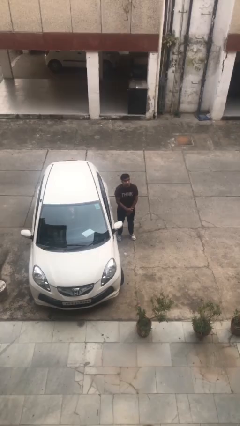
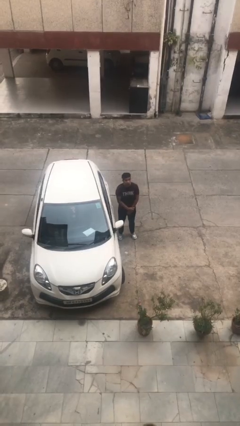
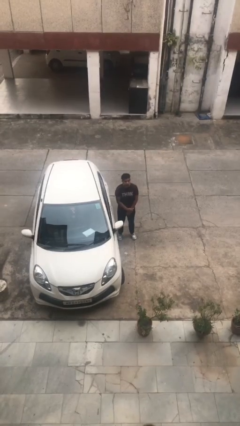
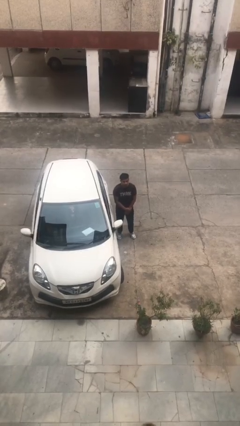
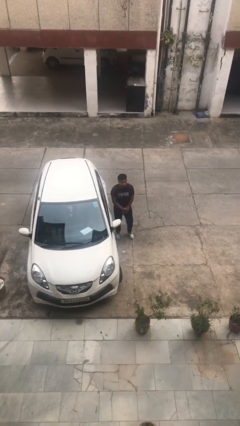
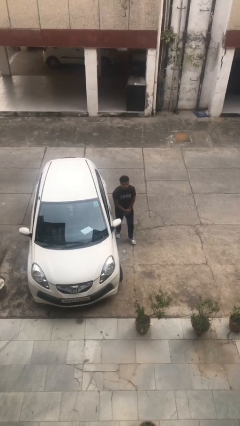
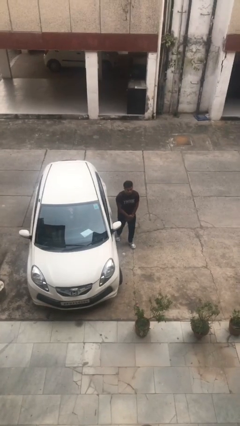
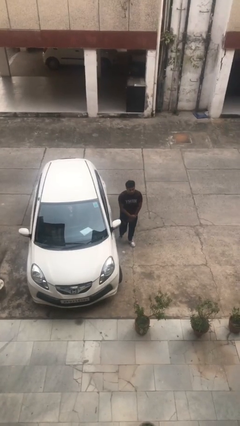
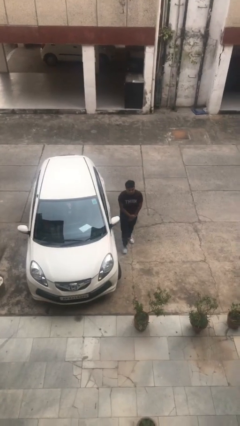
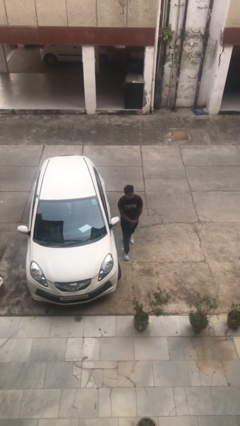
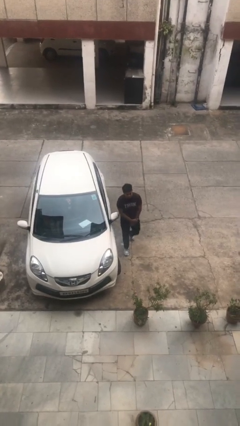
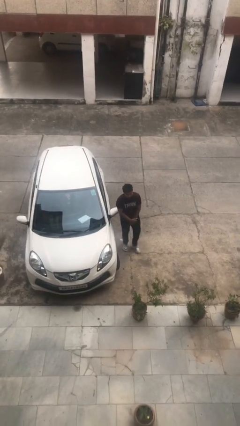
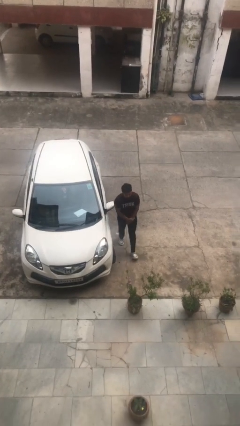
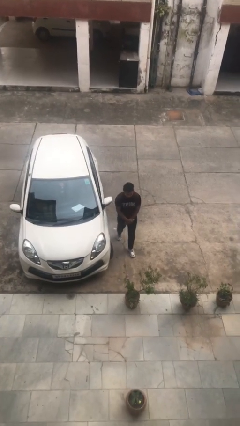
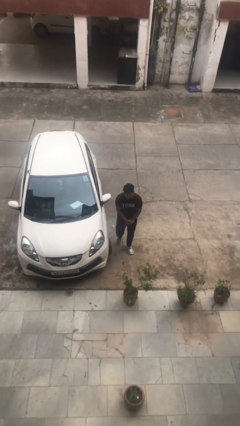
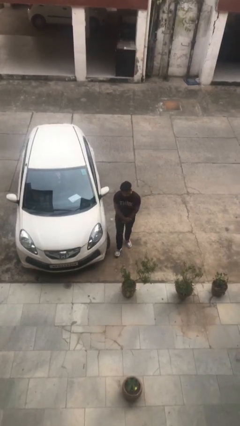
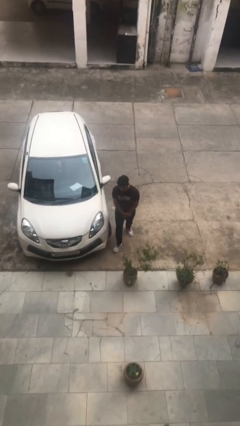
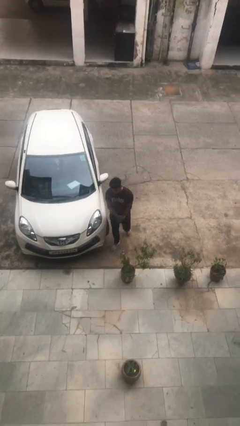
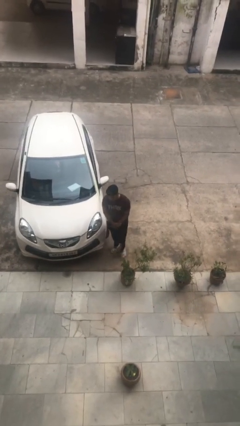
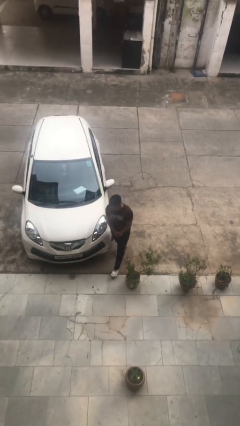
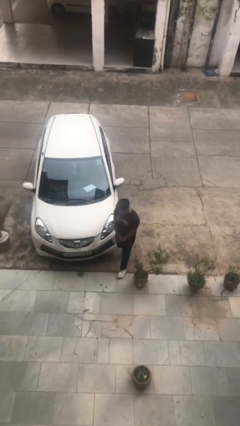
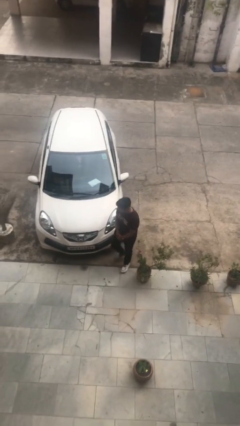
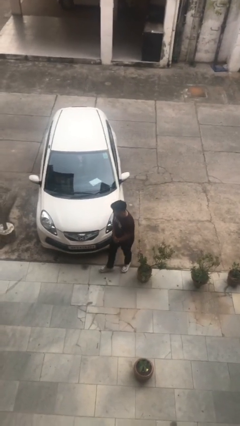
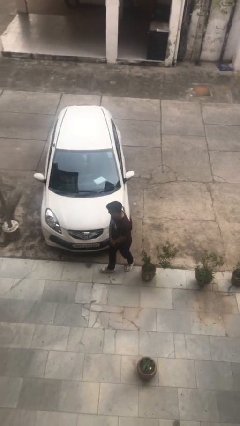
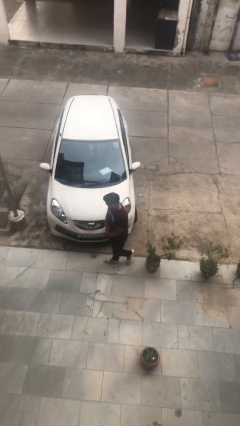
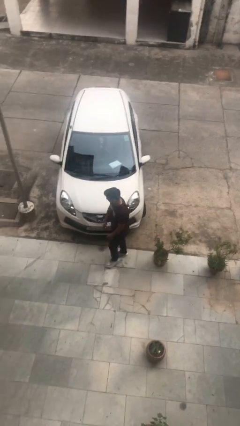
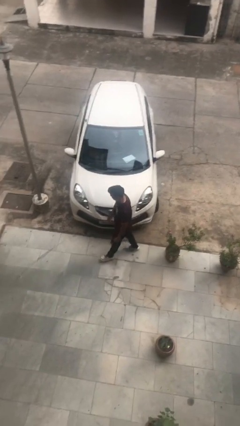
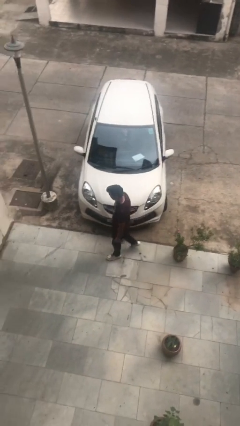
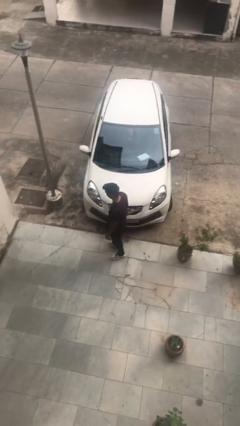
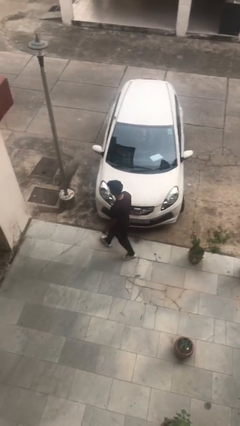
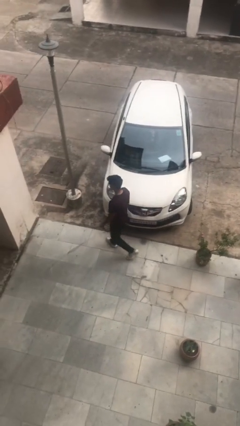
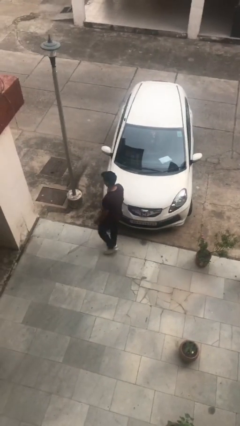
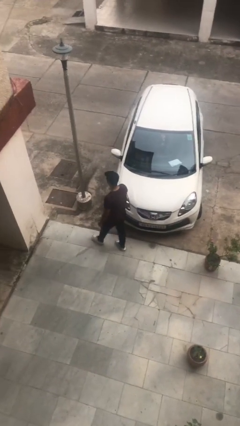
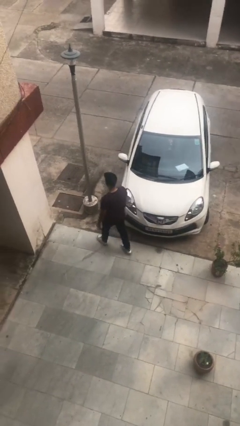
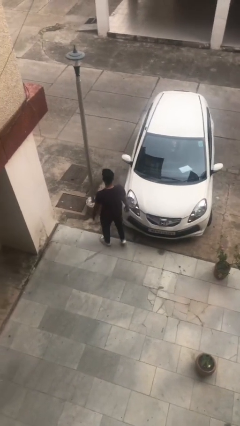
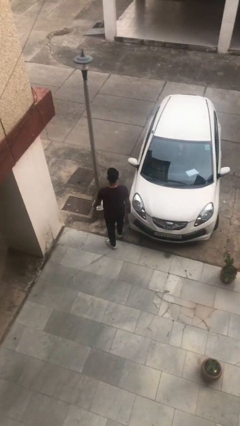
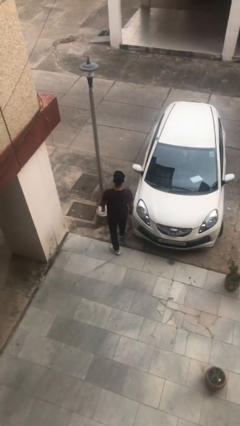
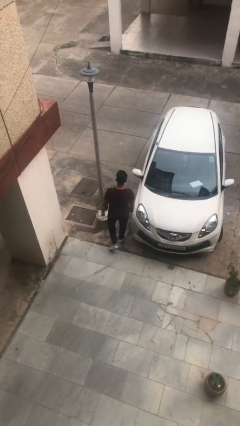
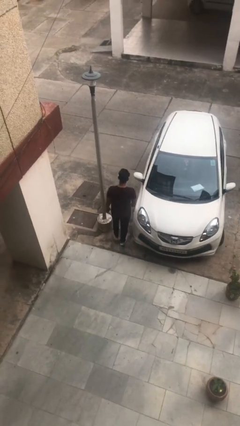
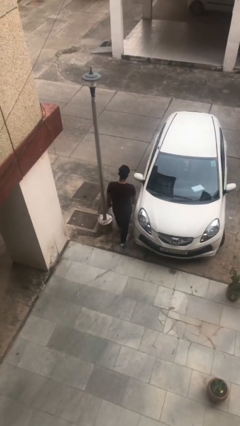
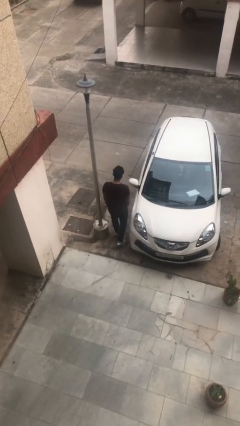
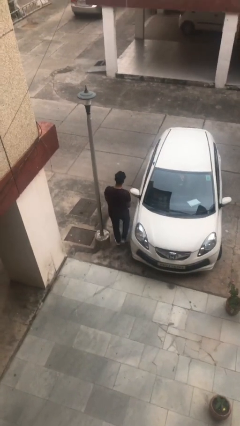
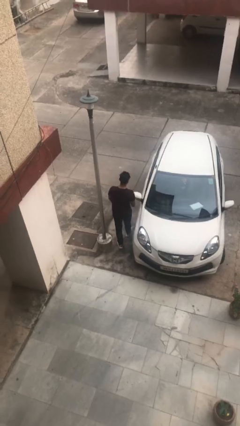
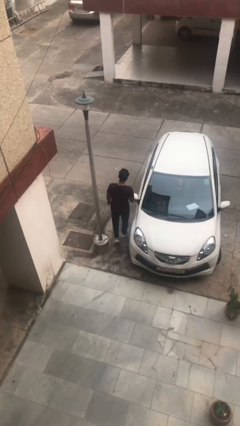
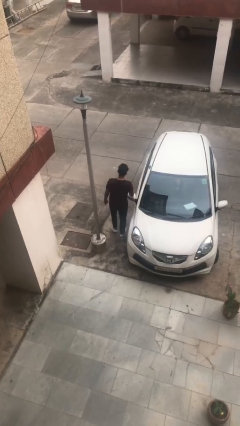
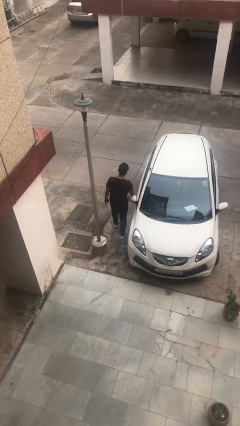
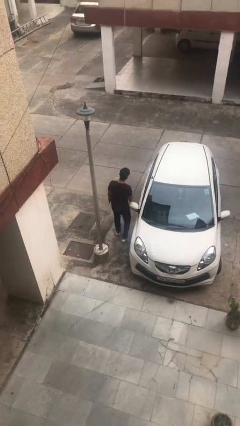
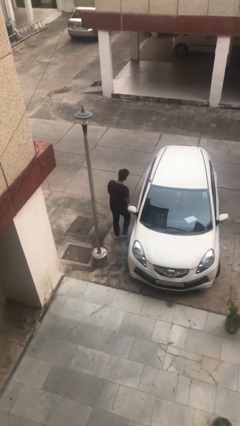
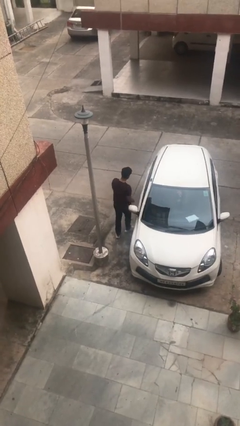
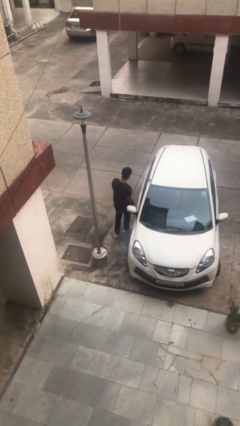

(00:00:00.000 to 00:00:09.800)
person walks around car

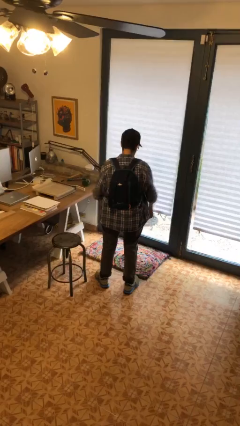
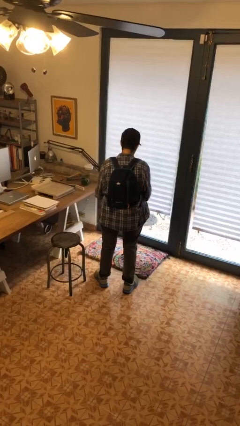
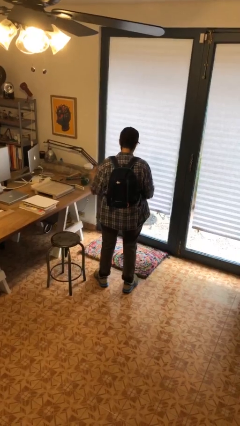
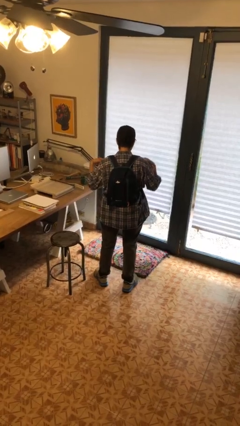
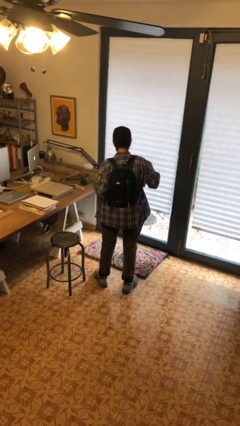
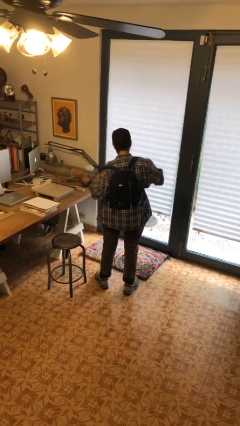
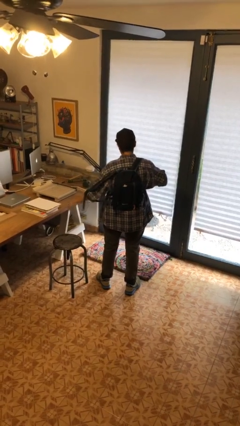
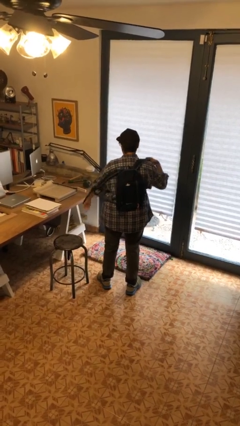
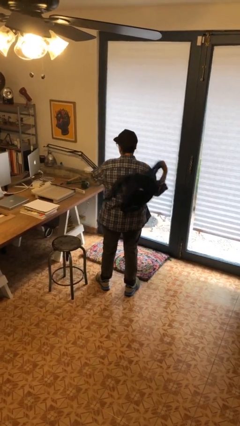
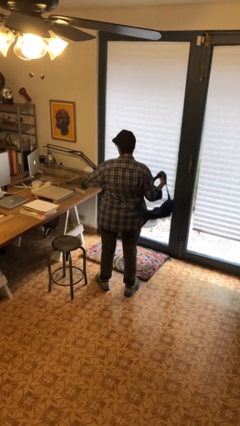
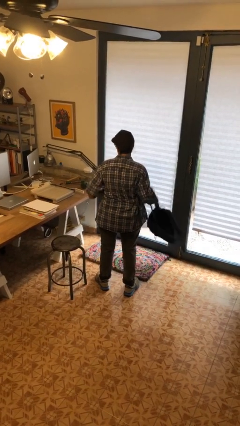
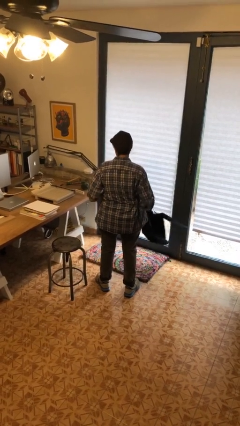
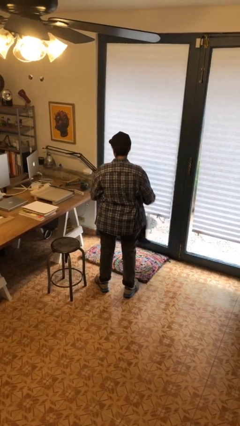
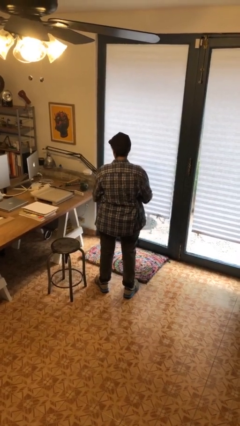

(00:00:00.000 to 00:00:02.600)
person takes off backpack

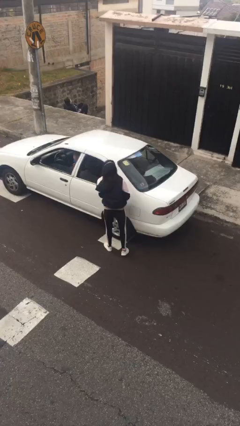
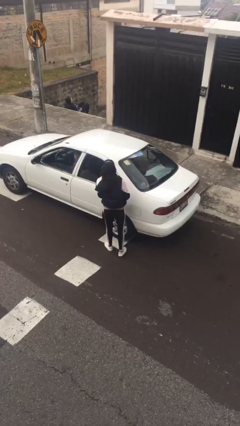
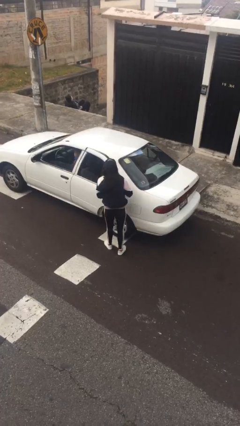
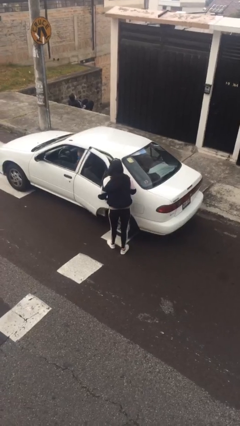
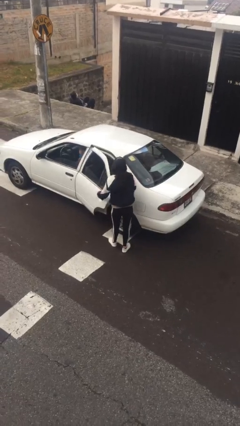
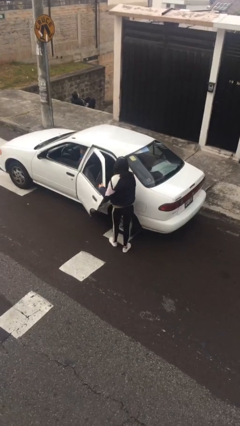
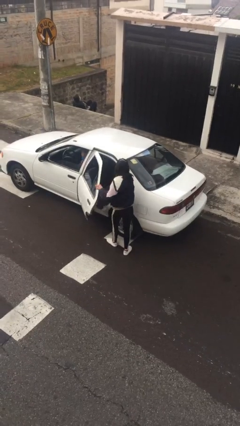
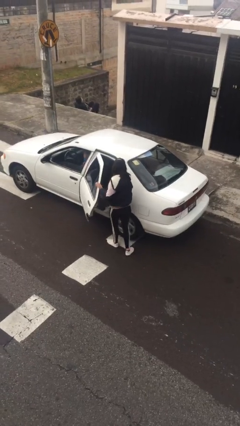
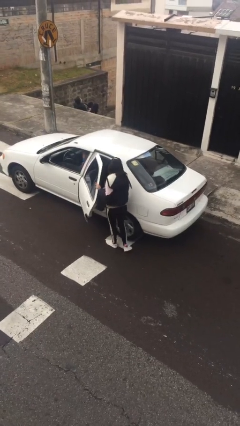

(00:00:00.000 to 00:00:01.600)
person opens car door

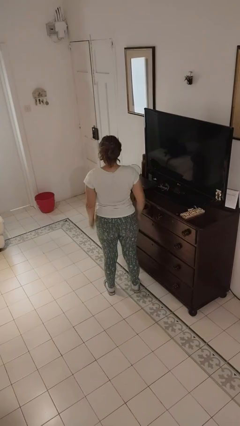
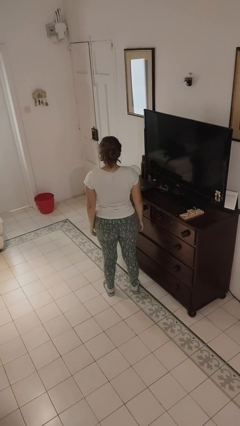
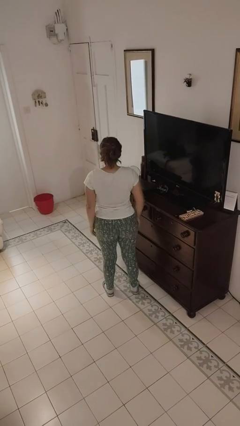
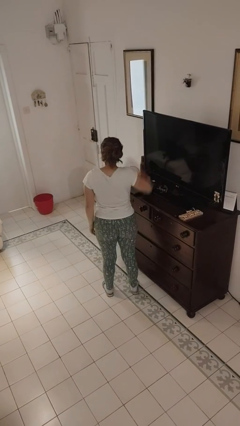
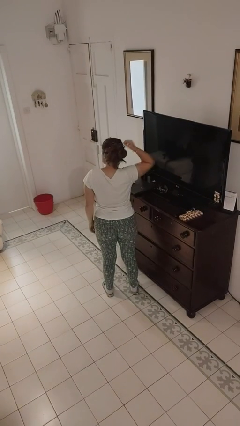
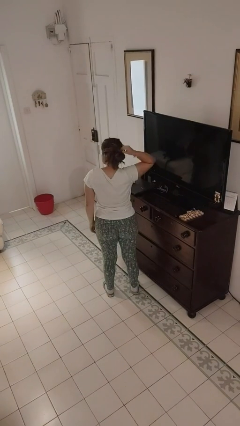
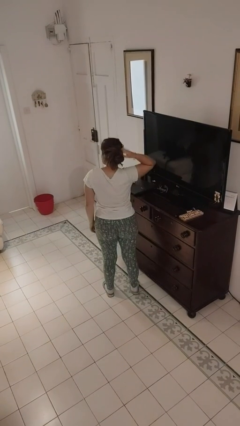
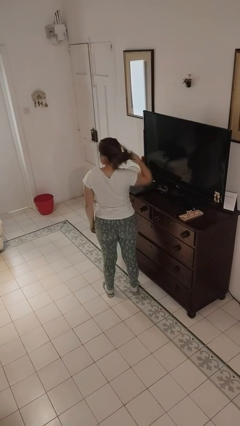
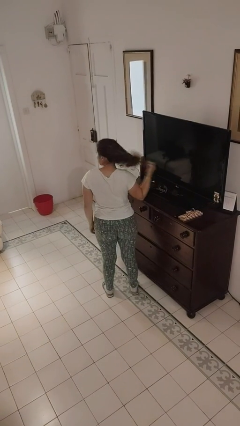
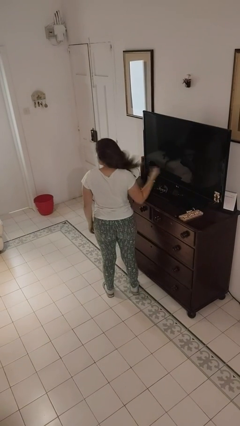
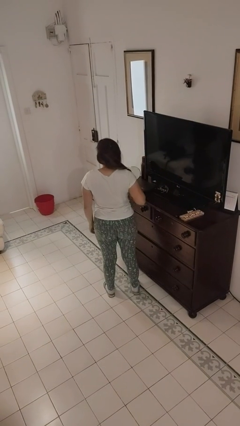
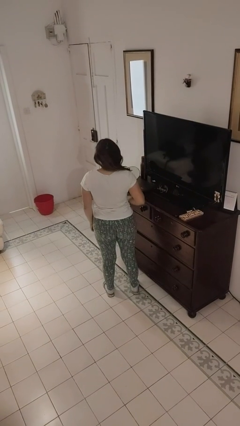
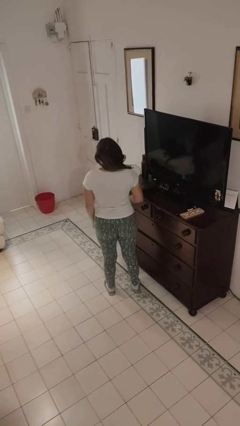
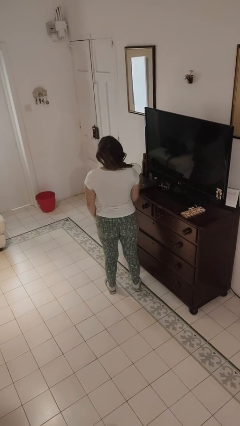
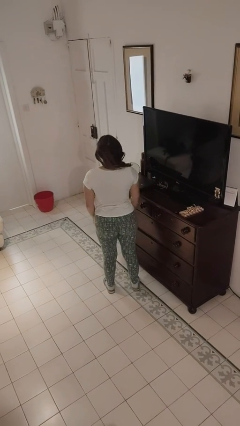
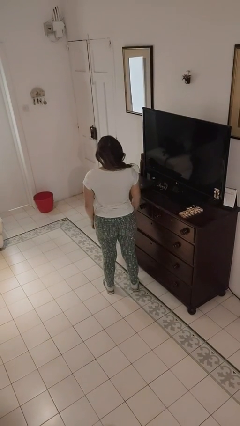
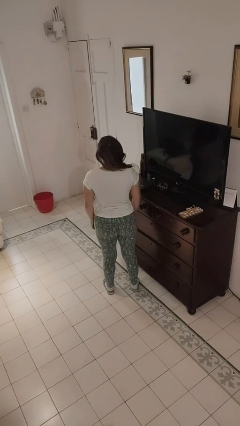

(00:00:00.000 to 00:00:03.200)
person takes off hairtie

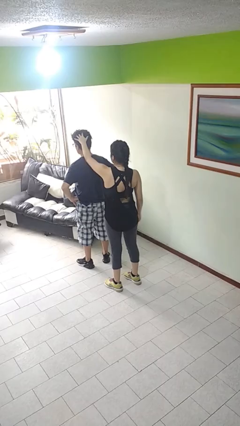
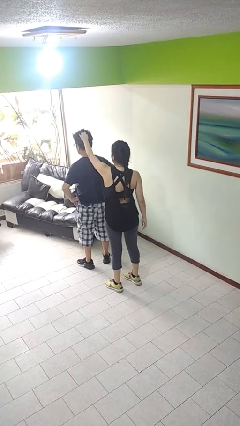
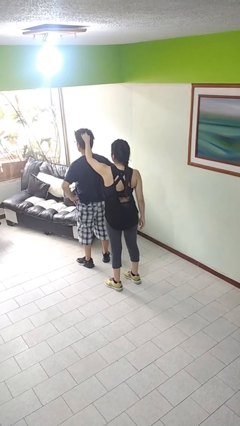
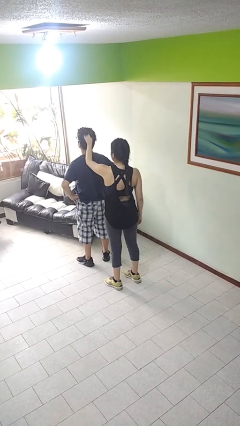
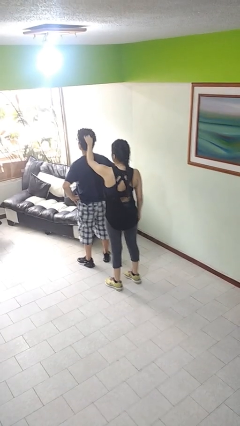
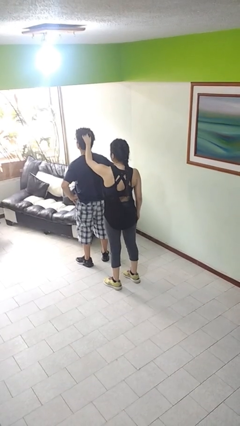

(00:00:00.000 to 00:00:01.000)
person grabs person by hair
